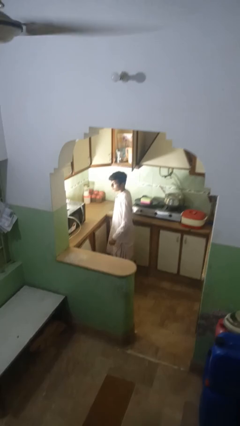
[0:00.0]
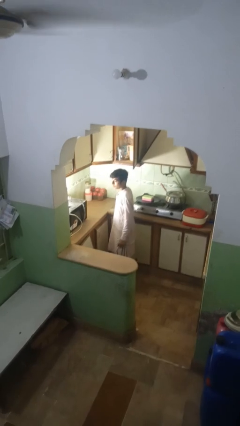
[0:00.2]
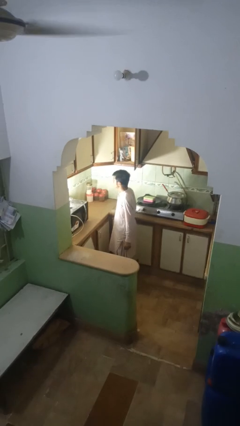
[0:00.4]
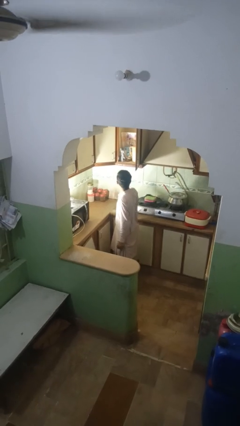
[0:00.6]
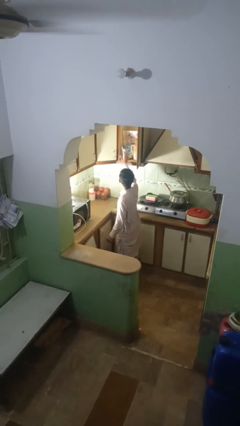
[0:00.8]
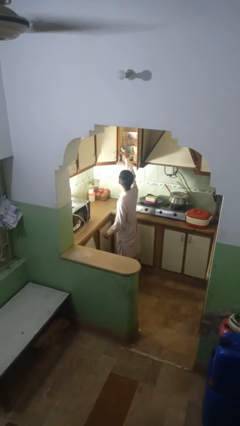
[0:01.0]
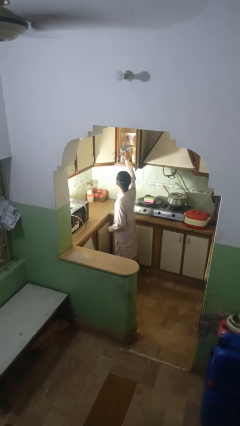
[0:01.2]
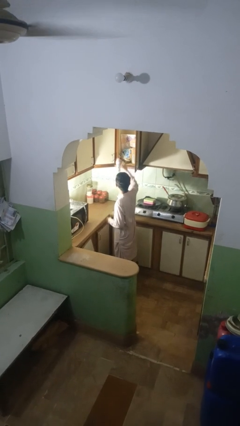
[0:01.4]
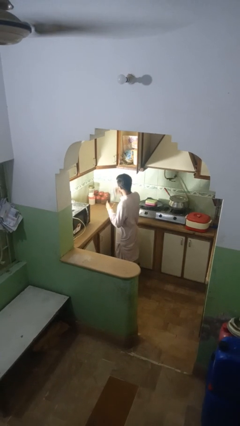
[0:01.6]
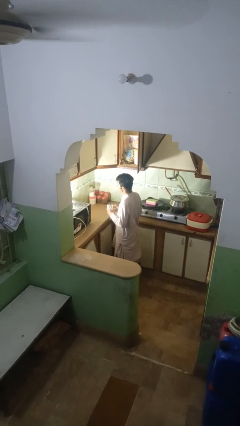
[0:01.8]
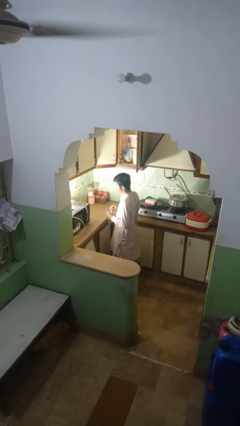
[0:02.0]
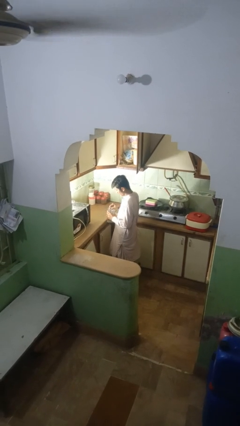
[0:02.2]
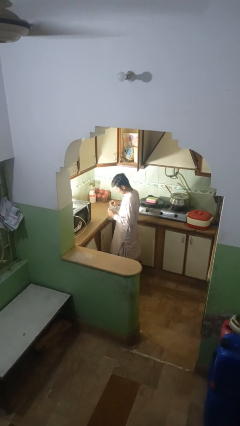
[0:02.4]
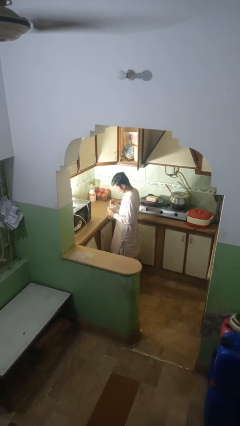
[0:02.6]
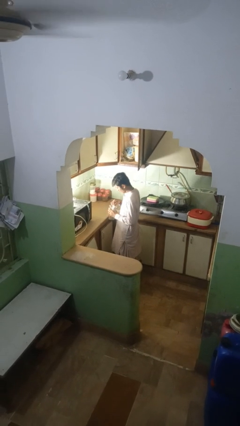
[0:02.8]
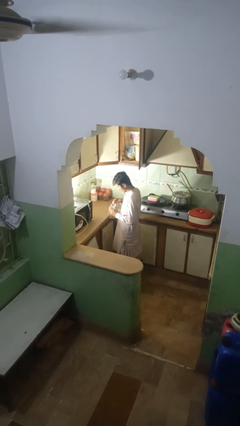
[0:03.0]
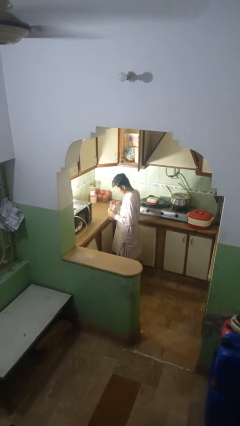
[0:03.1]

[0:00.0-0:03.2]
person takes object from kitchen drawer

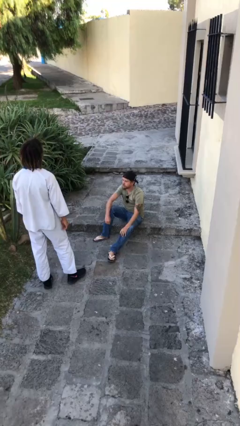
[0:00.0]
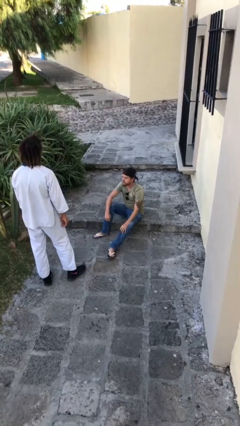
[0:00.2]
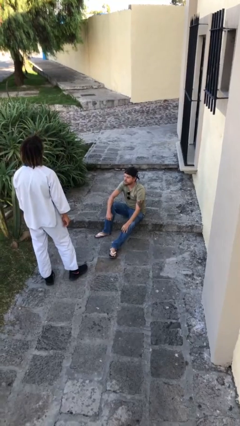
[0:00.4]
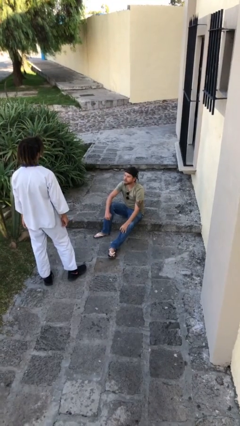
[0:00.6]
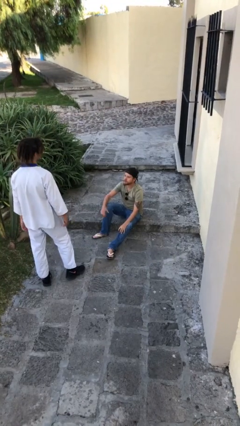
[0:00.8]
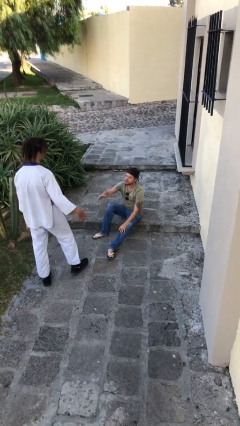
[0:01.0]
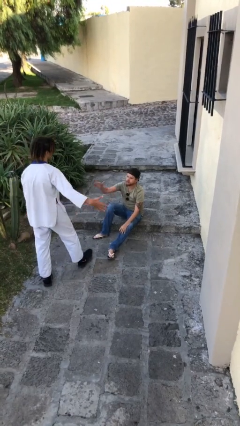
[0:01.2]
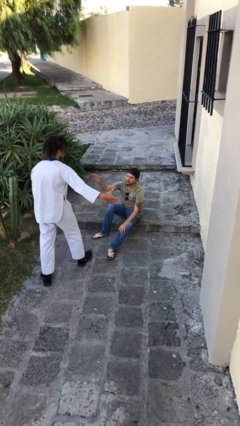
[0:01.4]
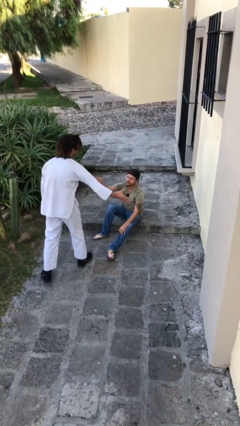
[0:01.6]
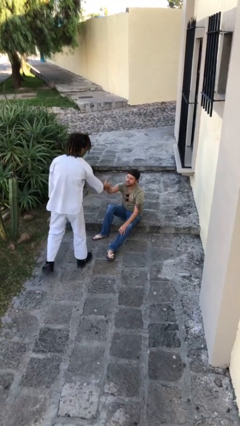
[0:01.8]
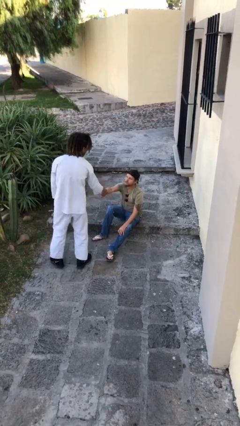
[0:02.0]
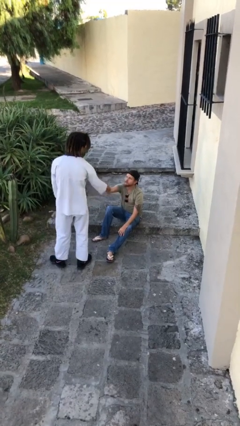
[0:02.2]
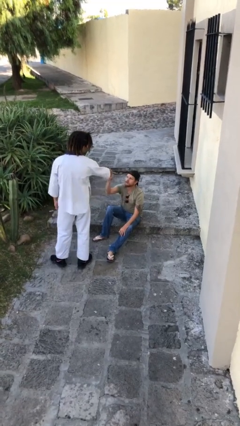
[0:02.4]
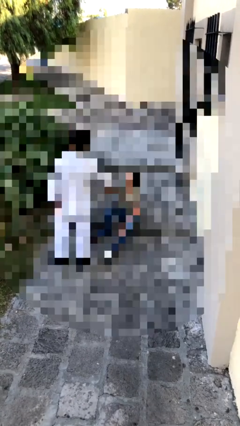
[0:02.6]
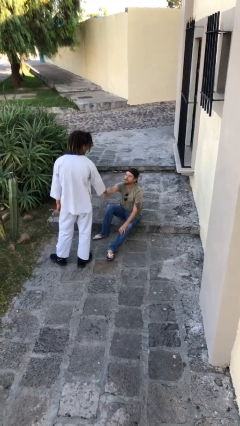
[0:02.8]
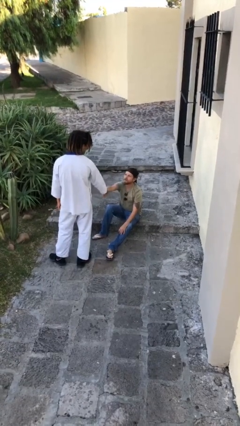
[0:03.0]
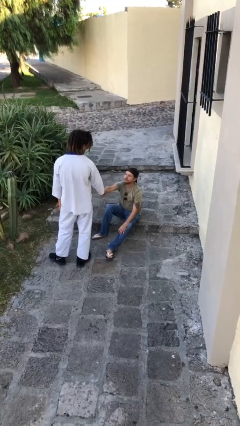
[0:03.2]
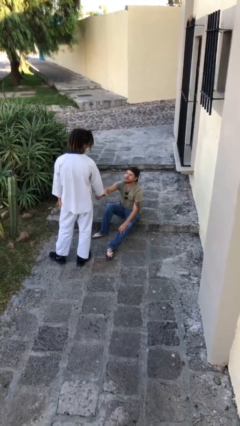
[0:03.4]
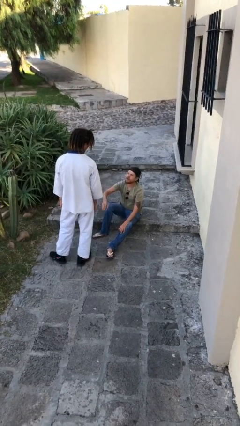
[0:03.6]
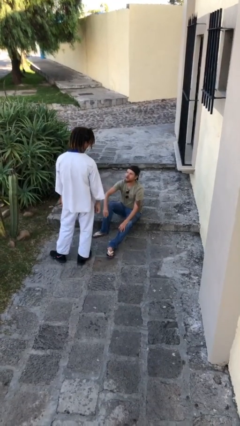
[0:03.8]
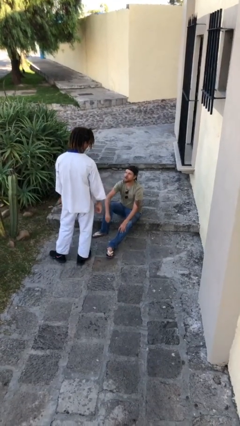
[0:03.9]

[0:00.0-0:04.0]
person shakes hand

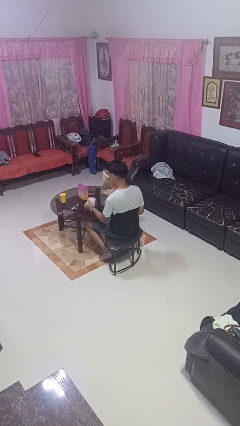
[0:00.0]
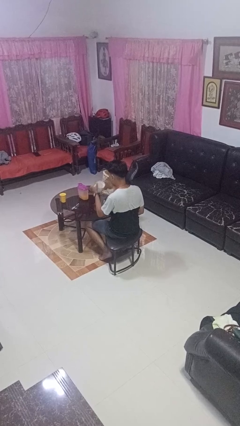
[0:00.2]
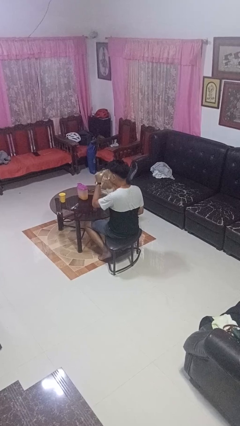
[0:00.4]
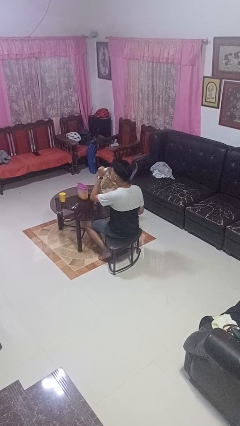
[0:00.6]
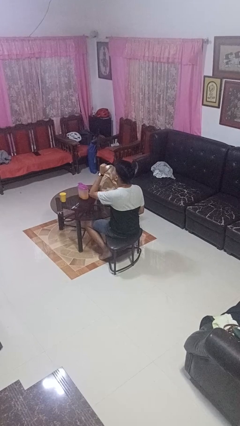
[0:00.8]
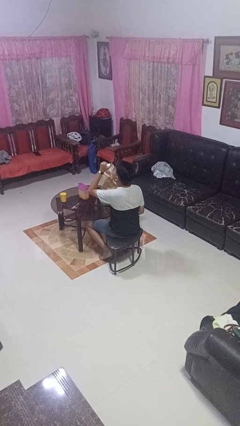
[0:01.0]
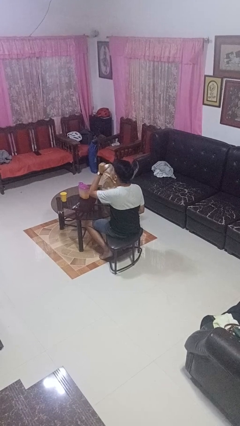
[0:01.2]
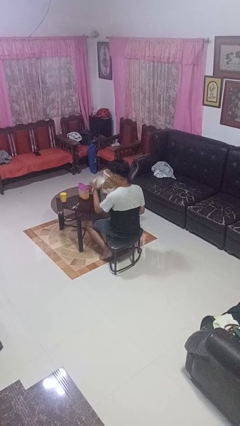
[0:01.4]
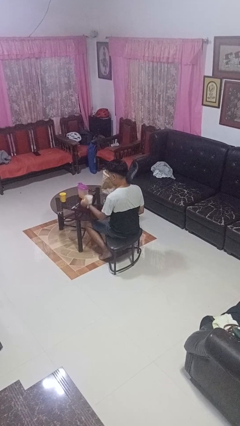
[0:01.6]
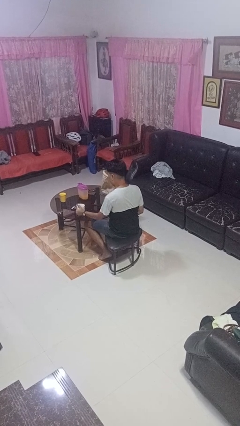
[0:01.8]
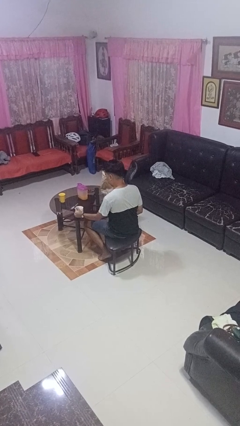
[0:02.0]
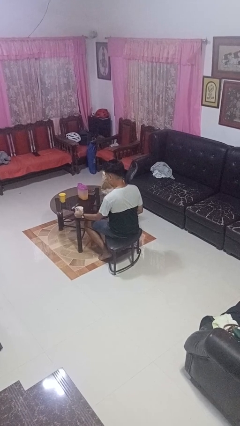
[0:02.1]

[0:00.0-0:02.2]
person drinks from mug

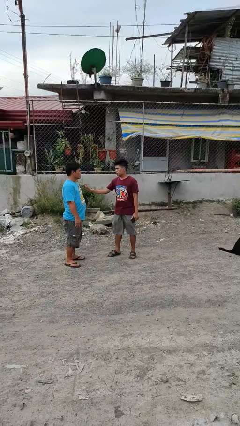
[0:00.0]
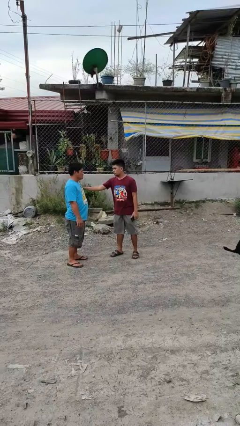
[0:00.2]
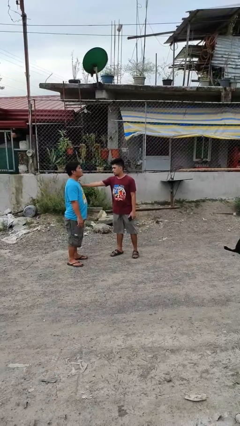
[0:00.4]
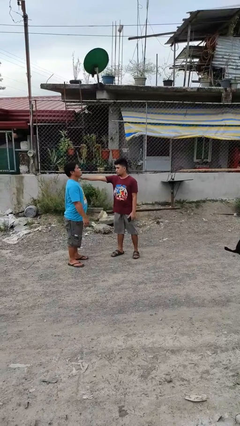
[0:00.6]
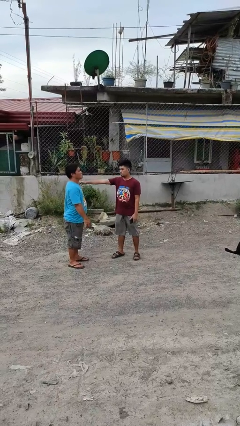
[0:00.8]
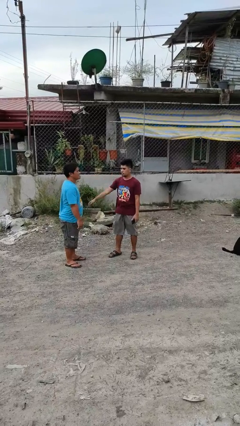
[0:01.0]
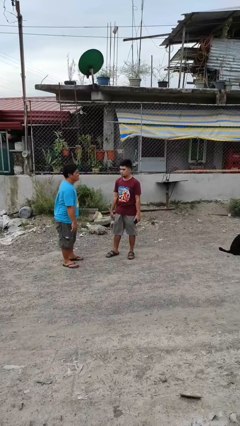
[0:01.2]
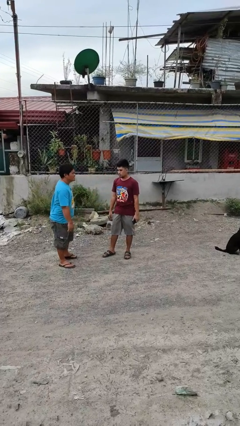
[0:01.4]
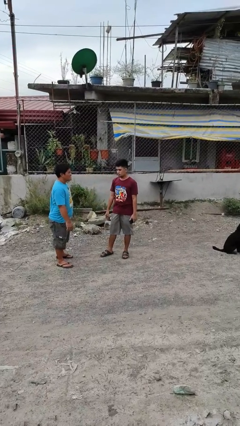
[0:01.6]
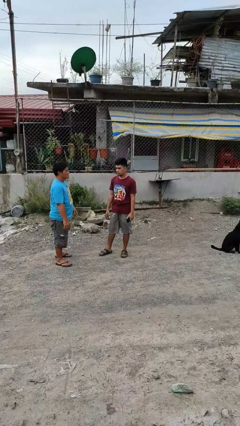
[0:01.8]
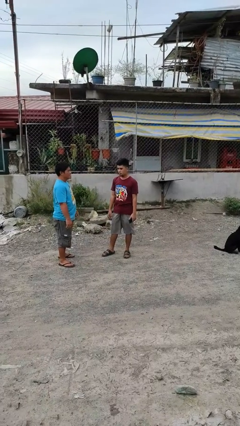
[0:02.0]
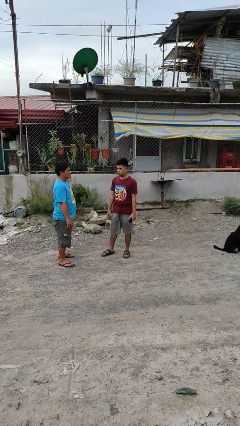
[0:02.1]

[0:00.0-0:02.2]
person shoves person

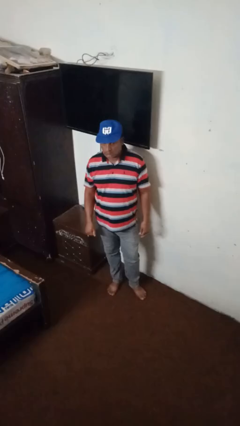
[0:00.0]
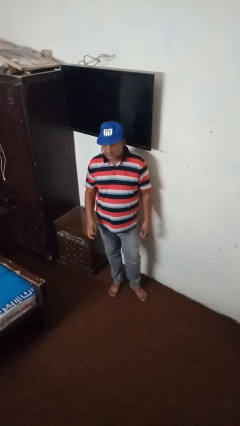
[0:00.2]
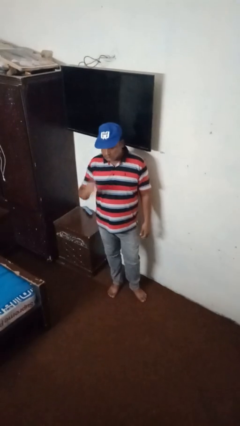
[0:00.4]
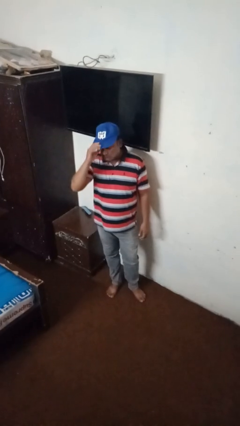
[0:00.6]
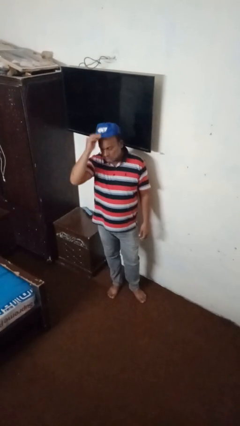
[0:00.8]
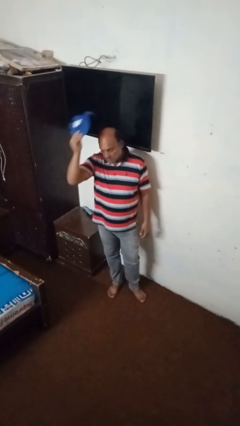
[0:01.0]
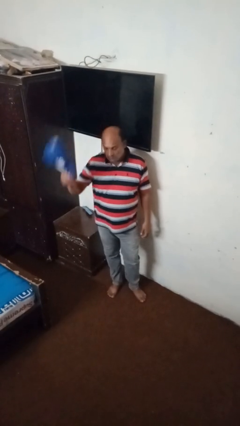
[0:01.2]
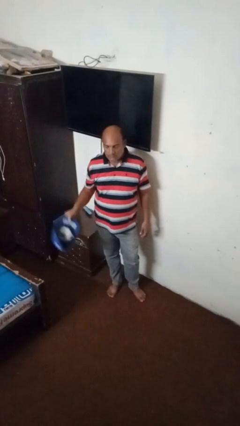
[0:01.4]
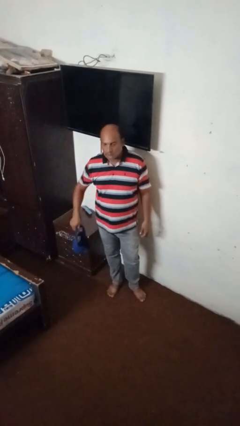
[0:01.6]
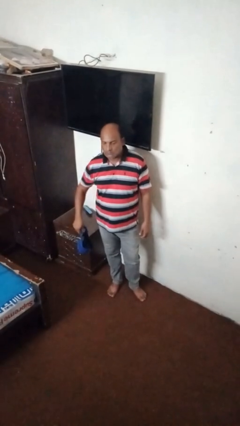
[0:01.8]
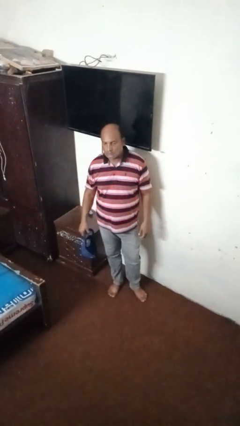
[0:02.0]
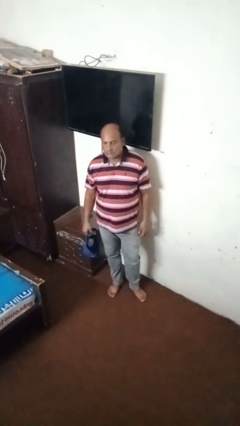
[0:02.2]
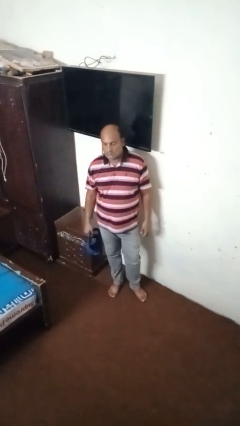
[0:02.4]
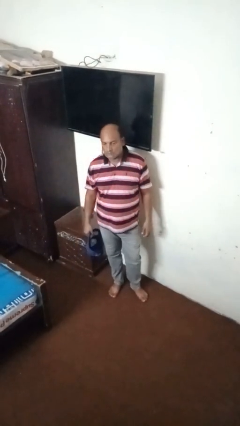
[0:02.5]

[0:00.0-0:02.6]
person takes off hat

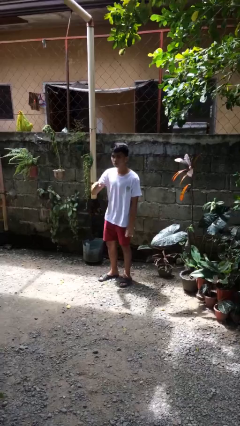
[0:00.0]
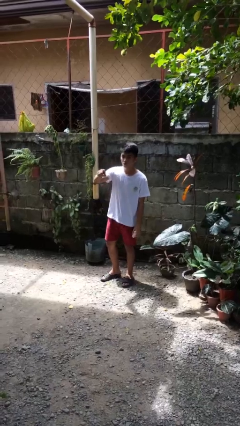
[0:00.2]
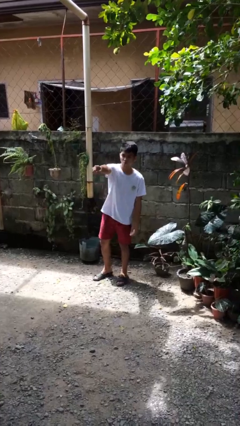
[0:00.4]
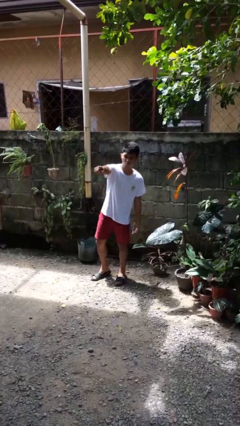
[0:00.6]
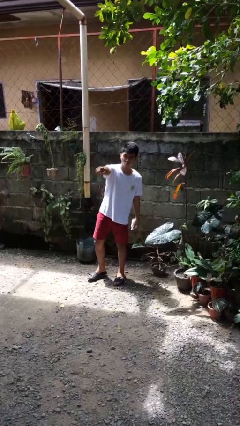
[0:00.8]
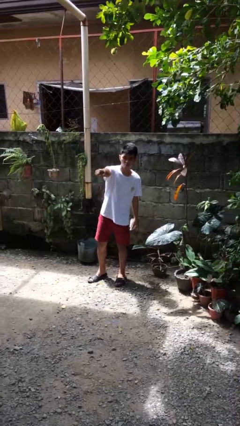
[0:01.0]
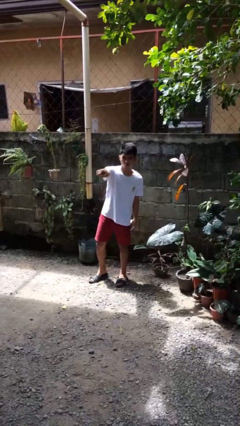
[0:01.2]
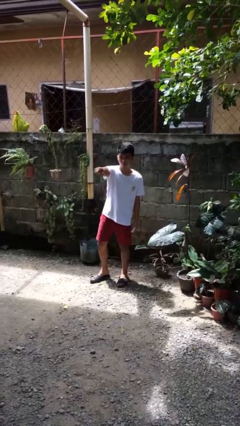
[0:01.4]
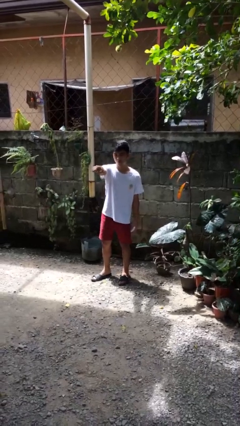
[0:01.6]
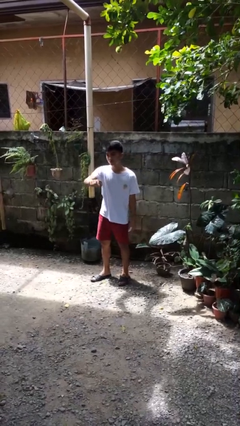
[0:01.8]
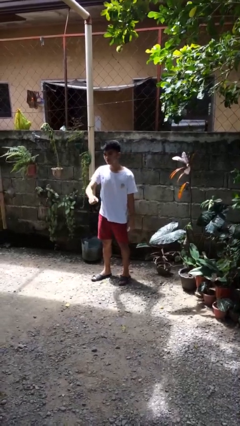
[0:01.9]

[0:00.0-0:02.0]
person points at person

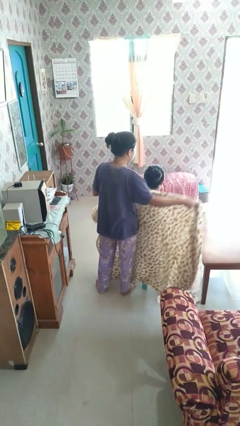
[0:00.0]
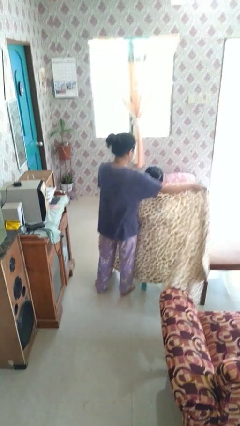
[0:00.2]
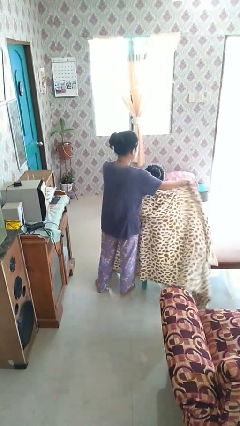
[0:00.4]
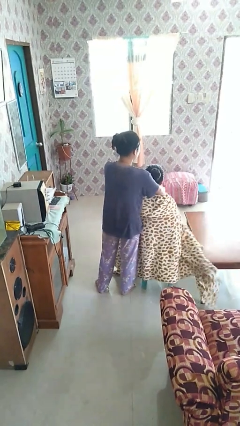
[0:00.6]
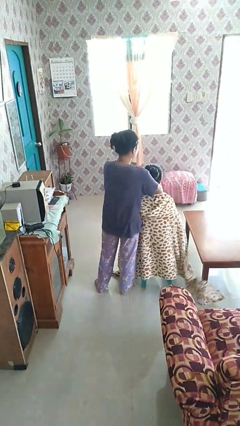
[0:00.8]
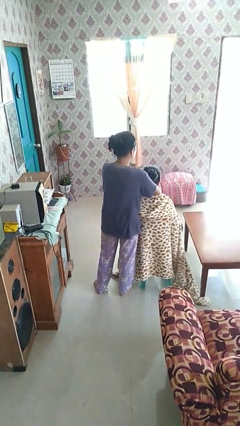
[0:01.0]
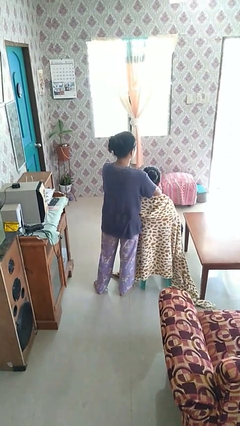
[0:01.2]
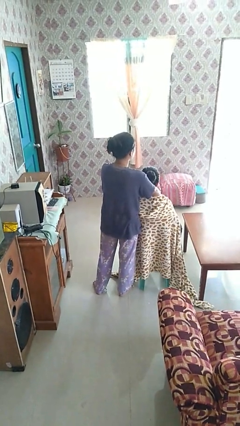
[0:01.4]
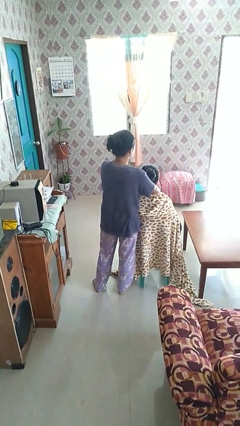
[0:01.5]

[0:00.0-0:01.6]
person covers friend with blanket
